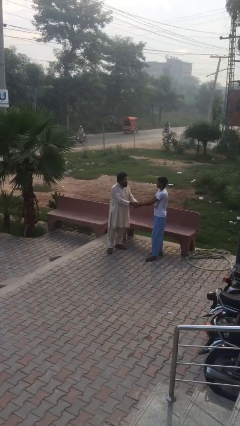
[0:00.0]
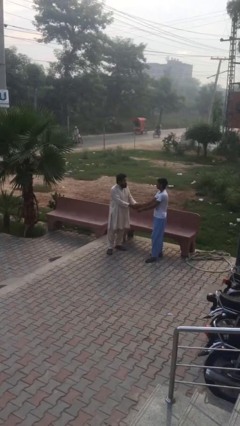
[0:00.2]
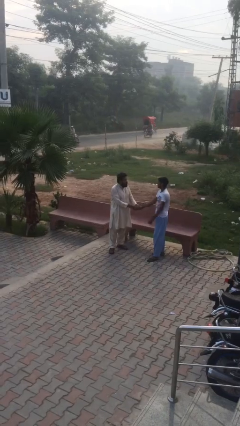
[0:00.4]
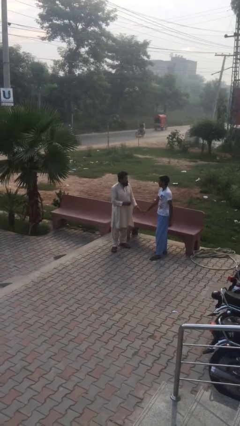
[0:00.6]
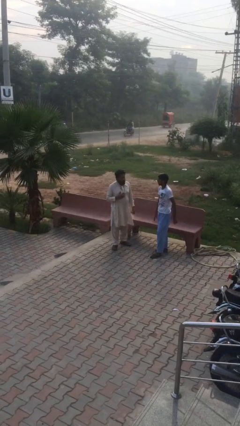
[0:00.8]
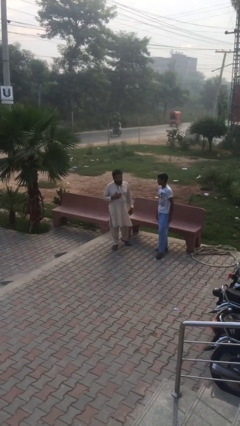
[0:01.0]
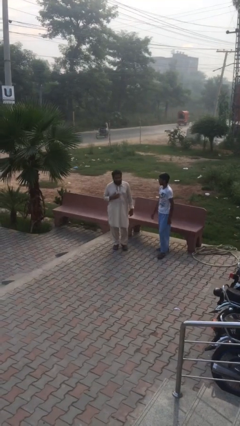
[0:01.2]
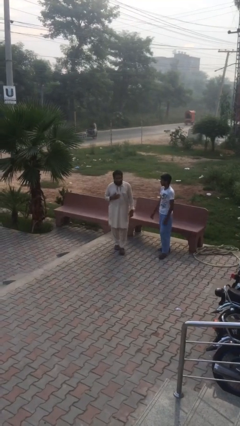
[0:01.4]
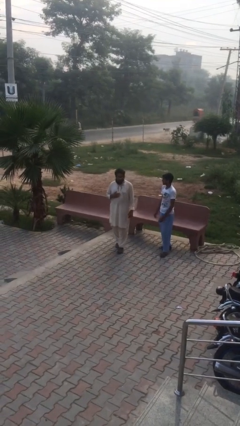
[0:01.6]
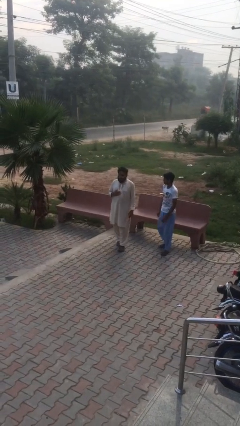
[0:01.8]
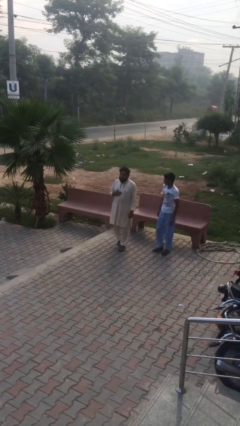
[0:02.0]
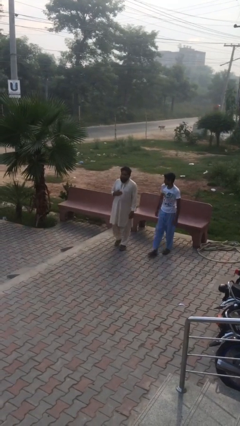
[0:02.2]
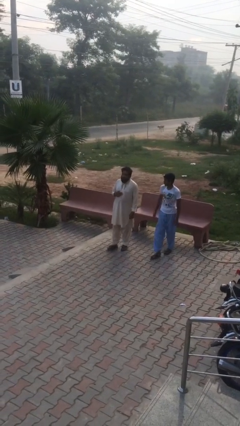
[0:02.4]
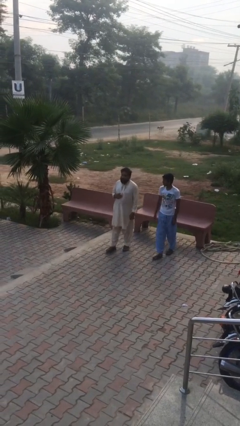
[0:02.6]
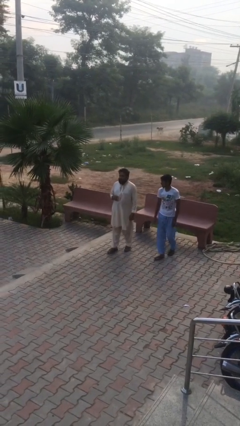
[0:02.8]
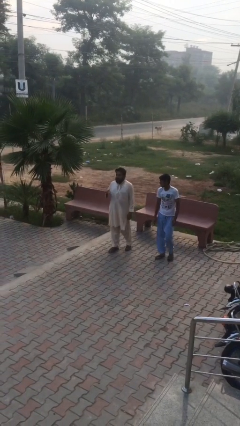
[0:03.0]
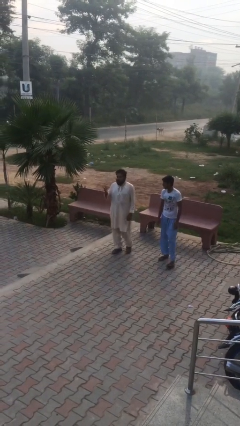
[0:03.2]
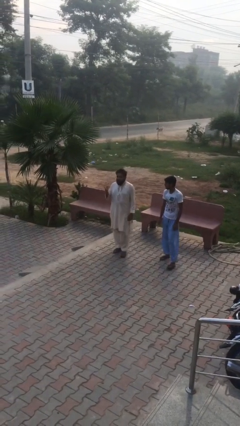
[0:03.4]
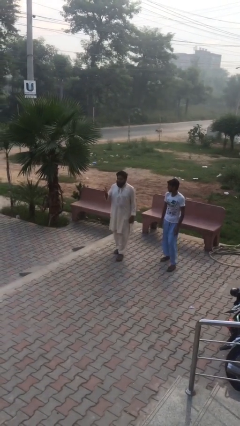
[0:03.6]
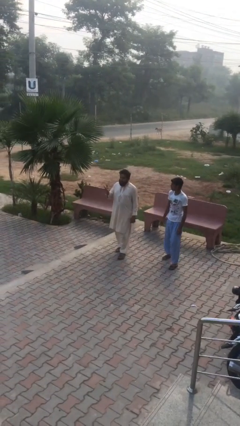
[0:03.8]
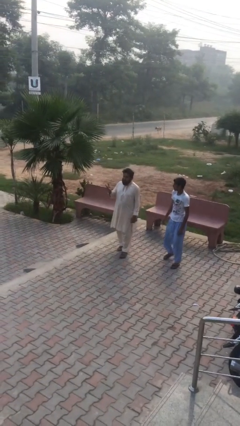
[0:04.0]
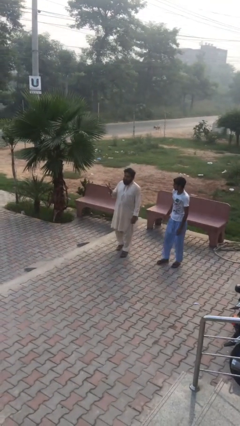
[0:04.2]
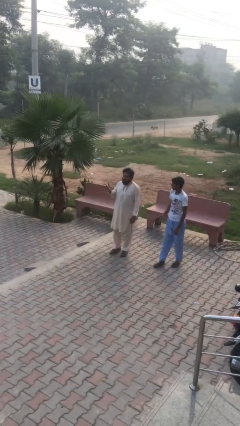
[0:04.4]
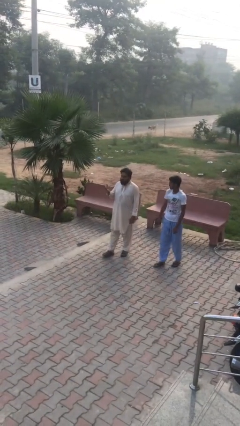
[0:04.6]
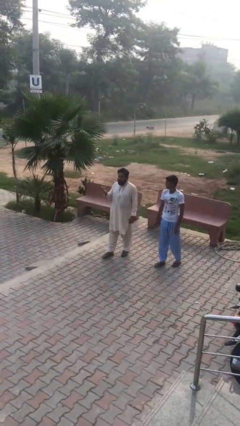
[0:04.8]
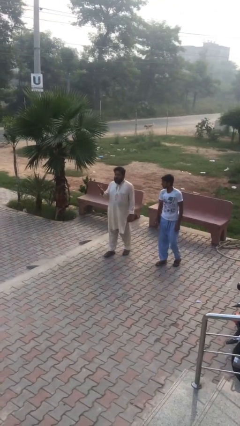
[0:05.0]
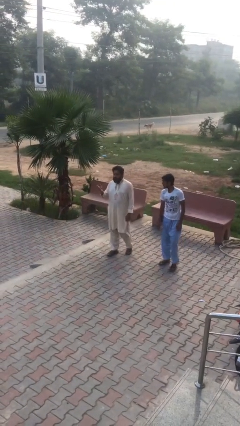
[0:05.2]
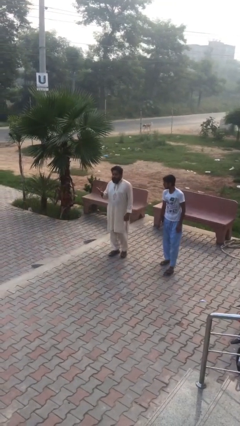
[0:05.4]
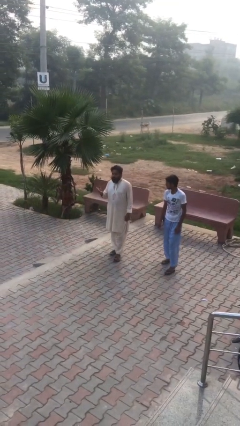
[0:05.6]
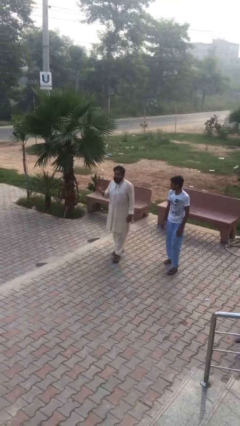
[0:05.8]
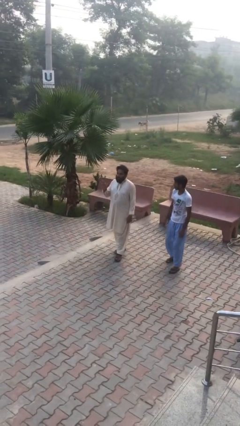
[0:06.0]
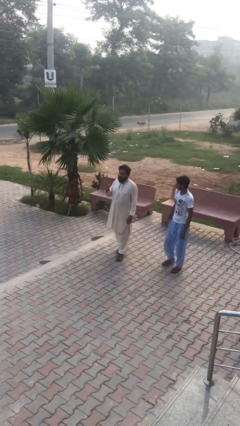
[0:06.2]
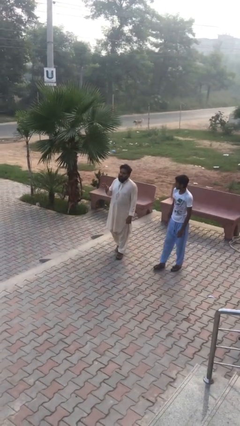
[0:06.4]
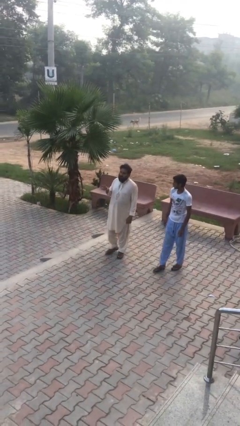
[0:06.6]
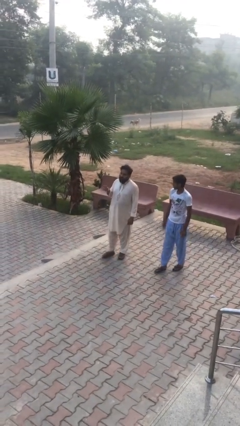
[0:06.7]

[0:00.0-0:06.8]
person talks to person

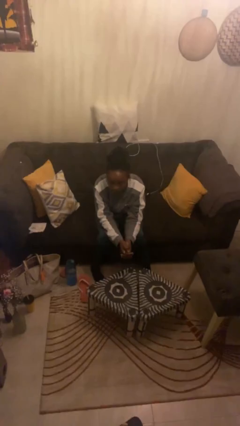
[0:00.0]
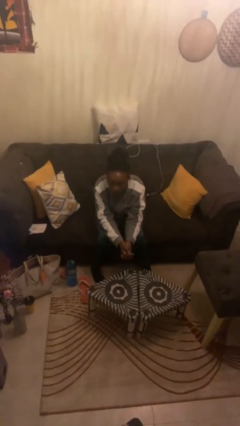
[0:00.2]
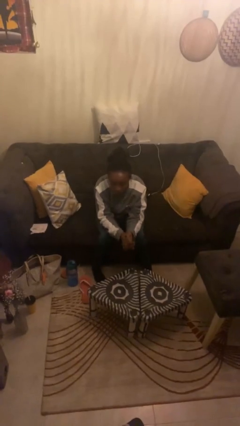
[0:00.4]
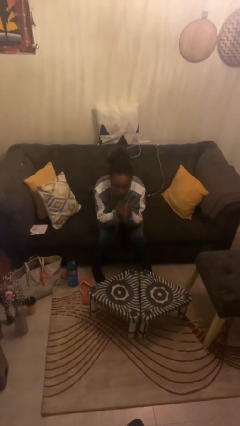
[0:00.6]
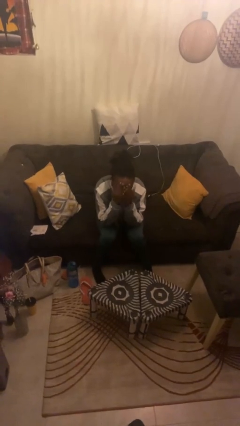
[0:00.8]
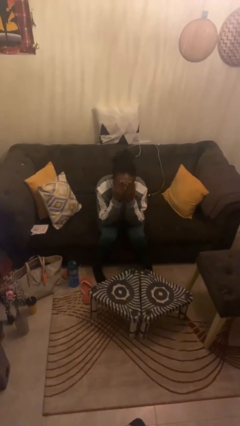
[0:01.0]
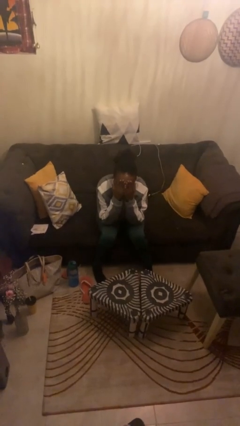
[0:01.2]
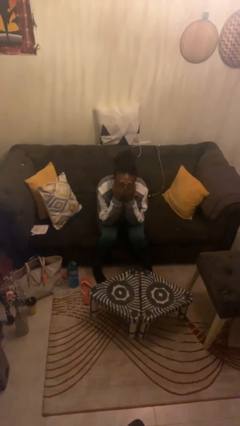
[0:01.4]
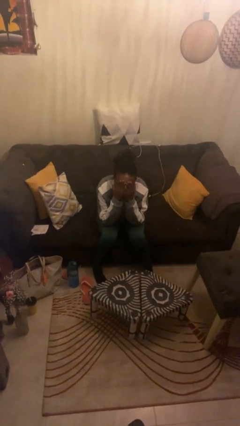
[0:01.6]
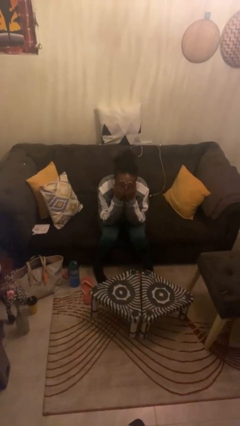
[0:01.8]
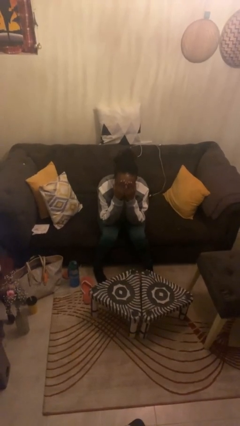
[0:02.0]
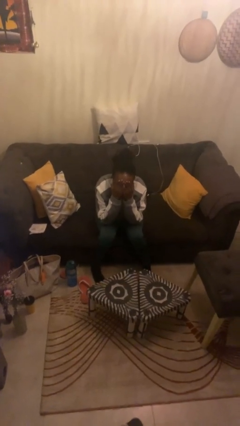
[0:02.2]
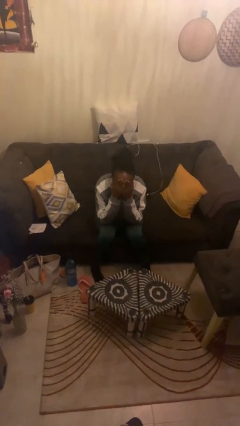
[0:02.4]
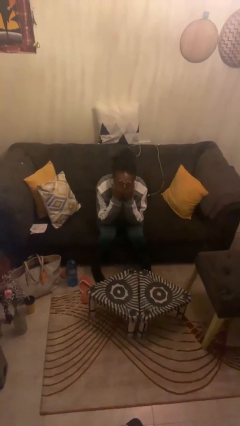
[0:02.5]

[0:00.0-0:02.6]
person covers face with hands

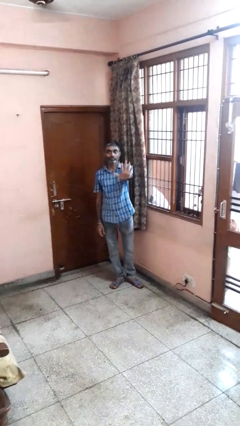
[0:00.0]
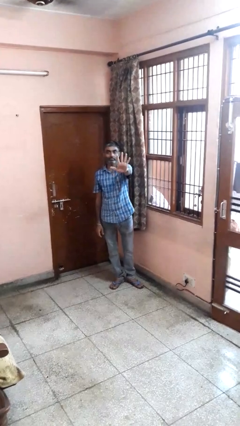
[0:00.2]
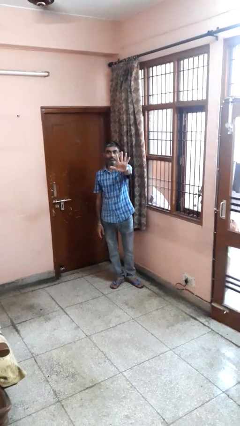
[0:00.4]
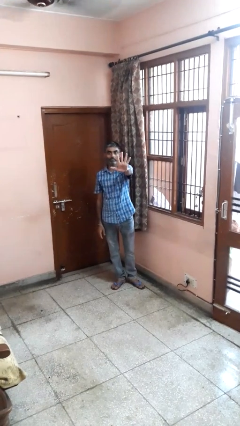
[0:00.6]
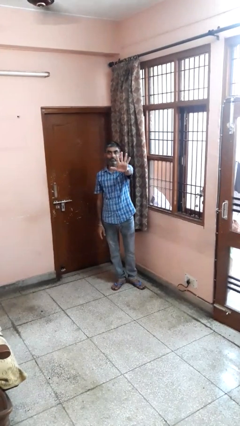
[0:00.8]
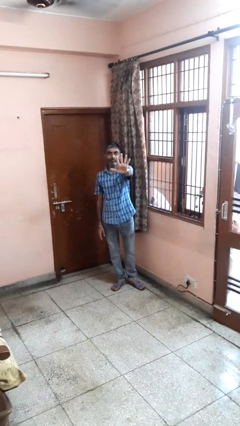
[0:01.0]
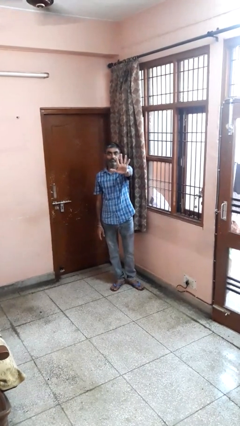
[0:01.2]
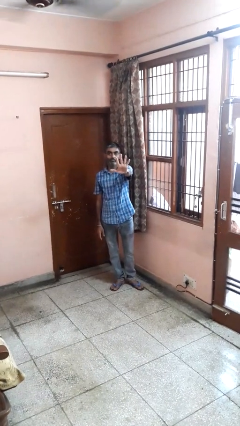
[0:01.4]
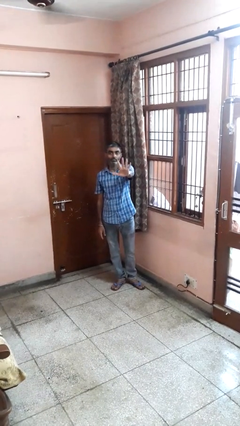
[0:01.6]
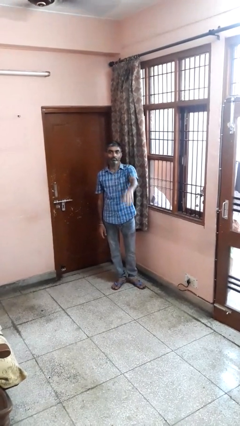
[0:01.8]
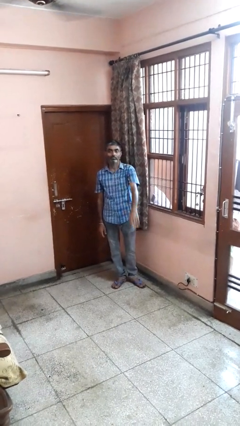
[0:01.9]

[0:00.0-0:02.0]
person gestures number five

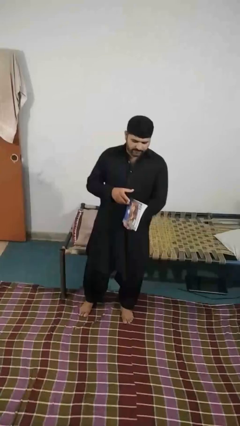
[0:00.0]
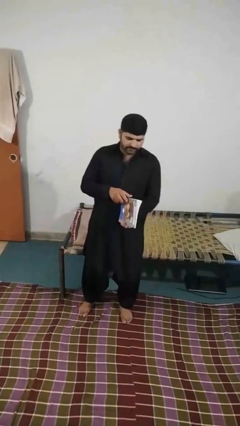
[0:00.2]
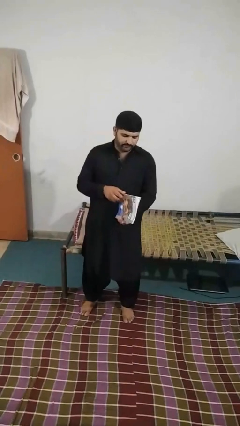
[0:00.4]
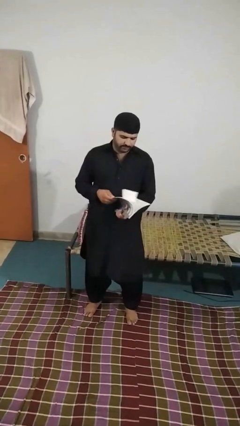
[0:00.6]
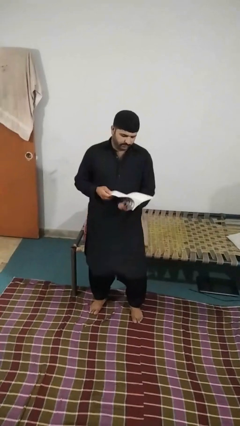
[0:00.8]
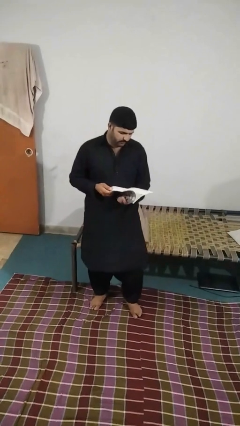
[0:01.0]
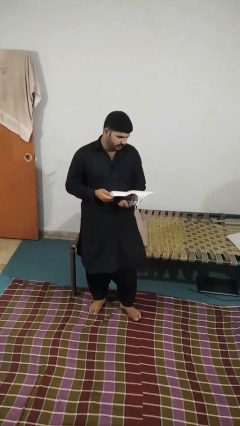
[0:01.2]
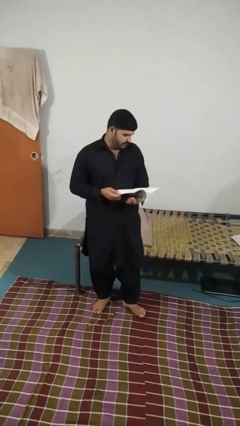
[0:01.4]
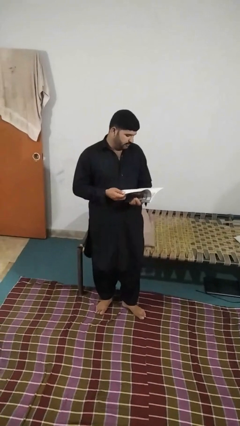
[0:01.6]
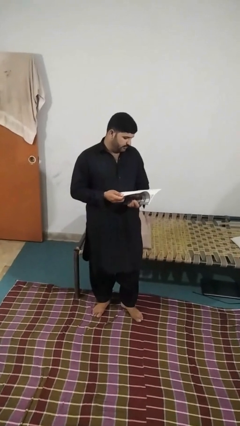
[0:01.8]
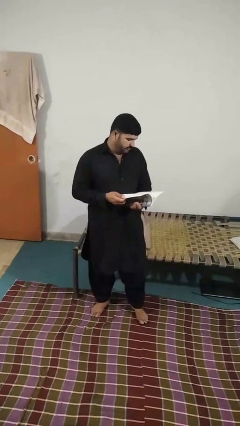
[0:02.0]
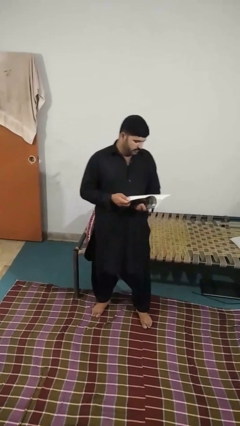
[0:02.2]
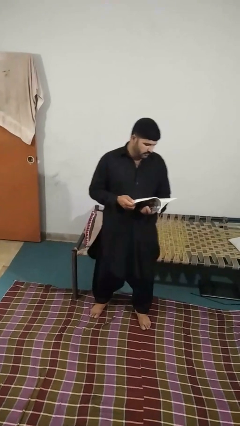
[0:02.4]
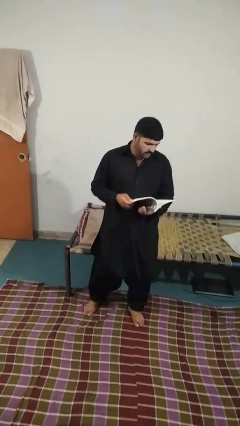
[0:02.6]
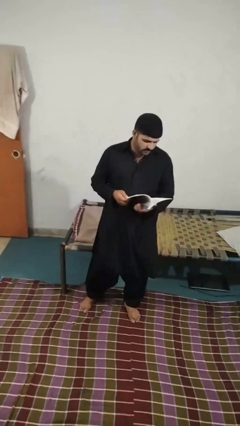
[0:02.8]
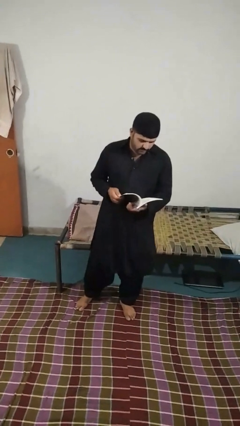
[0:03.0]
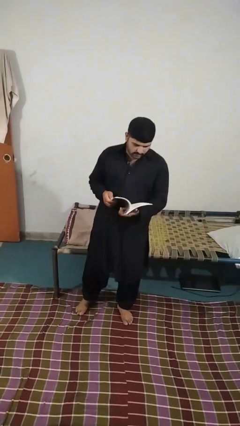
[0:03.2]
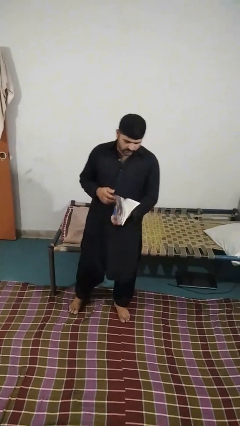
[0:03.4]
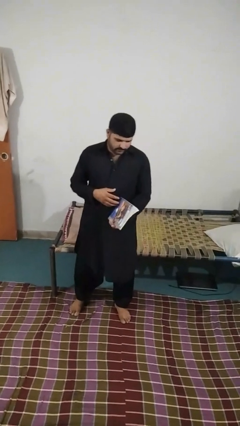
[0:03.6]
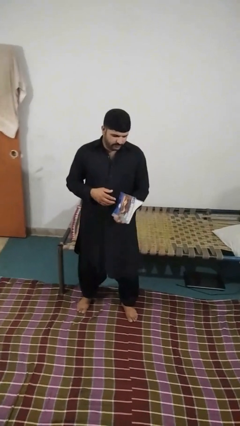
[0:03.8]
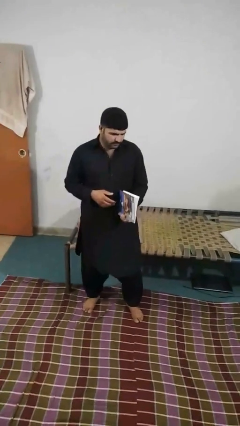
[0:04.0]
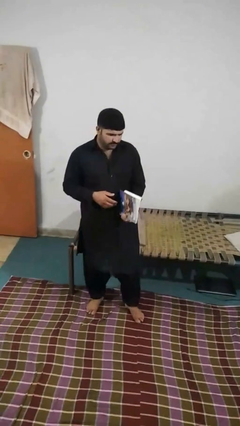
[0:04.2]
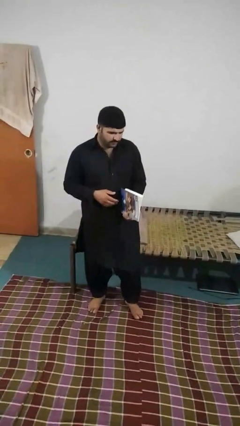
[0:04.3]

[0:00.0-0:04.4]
person reads magazine

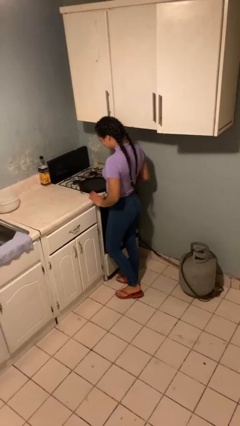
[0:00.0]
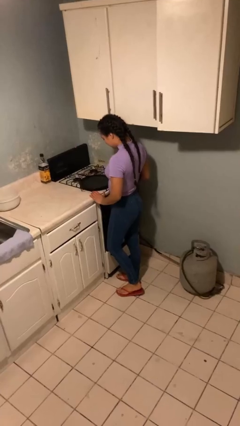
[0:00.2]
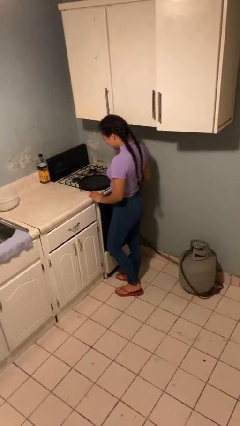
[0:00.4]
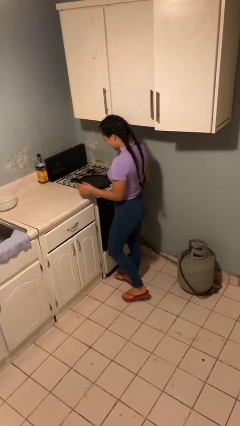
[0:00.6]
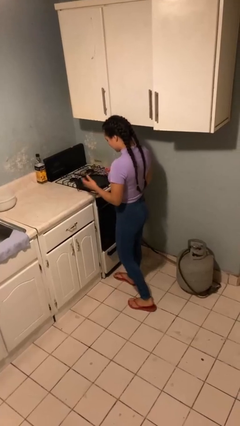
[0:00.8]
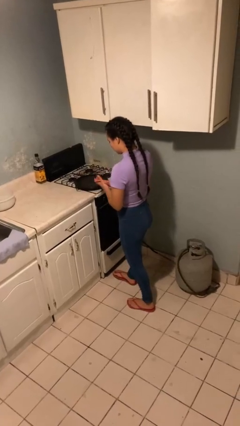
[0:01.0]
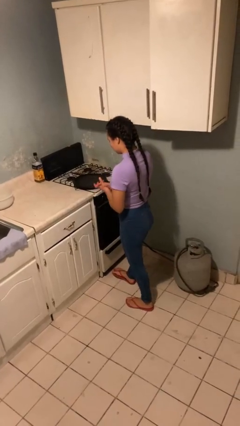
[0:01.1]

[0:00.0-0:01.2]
person burns hand

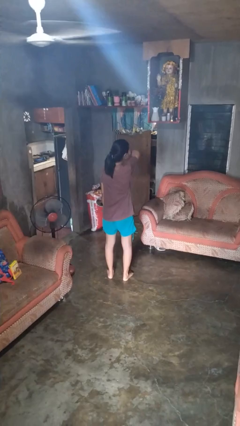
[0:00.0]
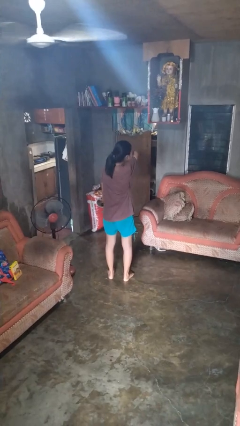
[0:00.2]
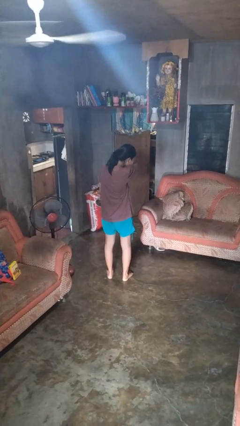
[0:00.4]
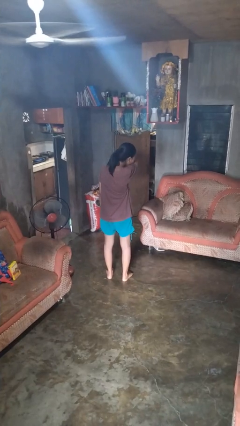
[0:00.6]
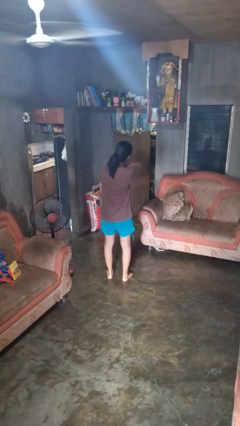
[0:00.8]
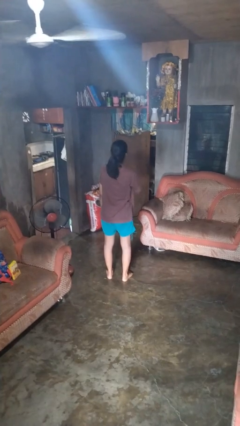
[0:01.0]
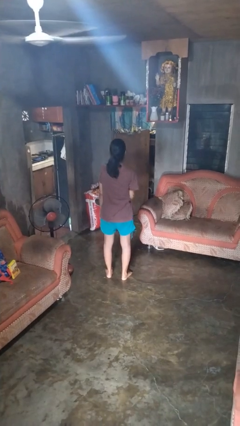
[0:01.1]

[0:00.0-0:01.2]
person sneezes into arm
